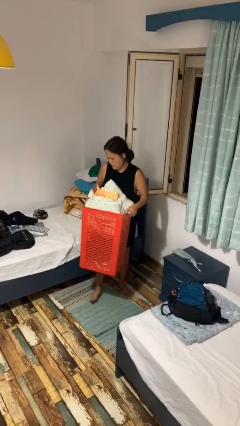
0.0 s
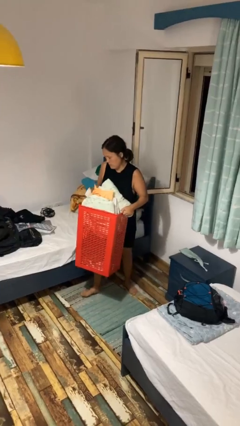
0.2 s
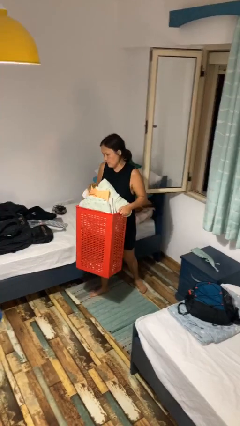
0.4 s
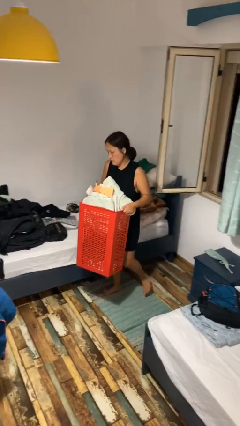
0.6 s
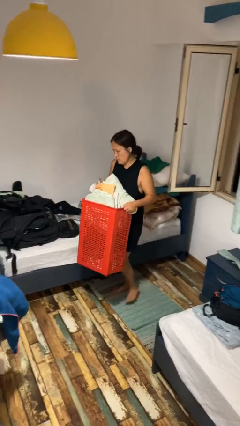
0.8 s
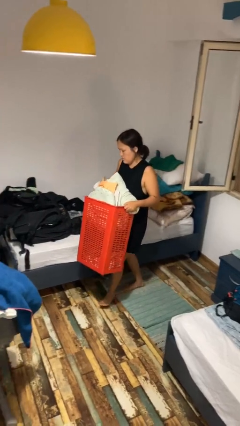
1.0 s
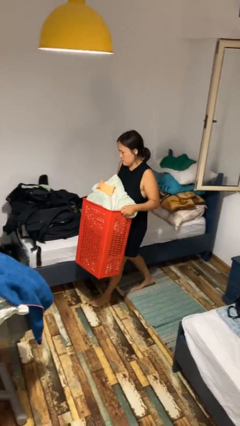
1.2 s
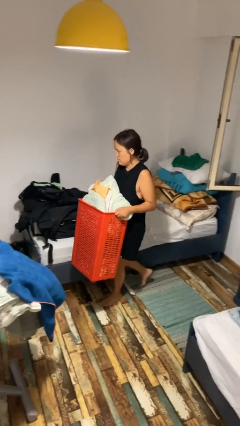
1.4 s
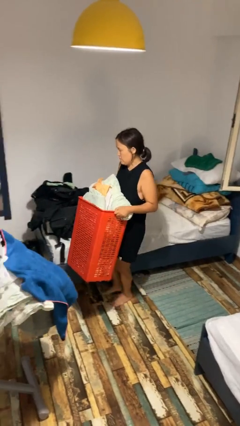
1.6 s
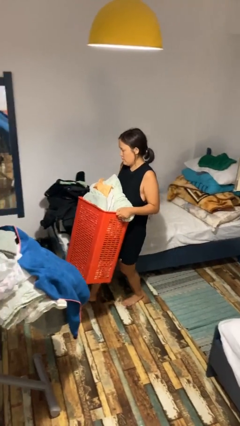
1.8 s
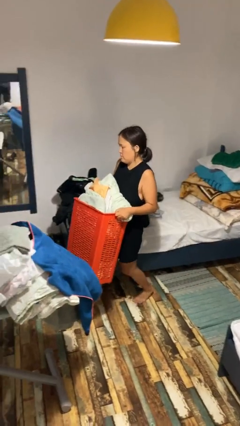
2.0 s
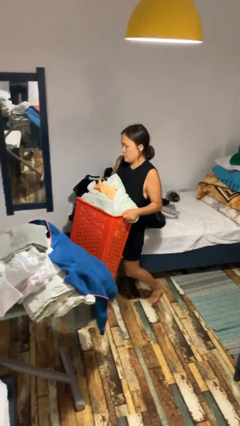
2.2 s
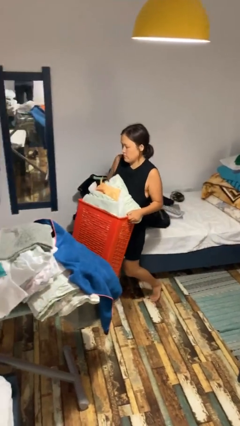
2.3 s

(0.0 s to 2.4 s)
person carries laundry basket

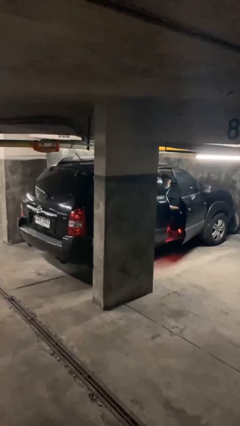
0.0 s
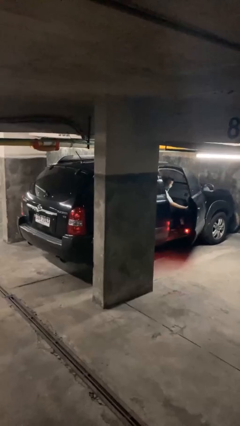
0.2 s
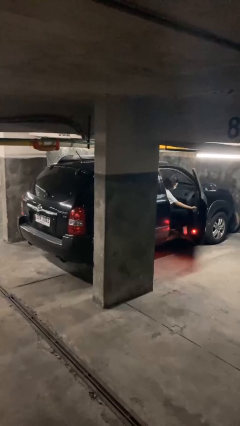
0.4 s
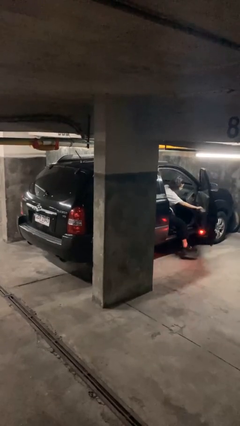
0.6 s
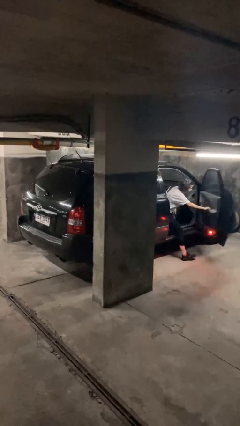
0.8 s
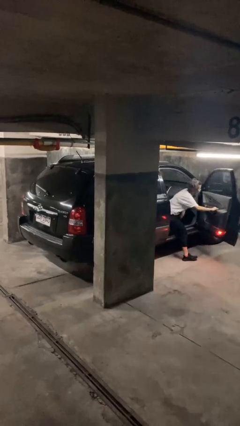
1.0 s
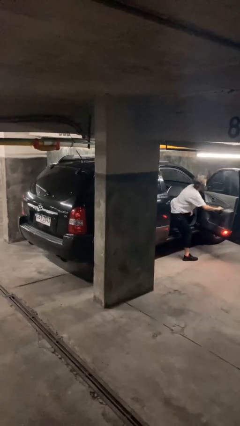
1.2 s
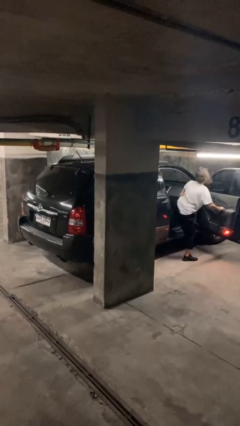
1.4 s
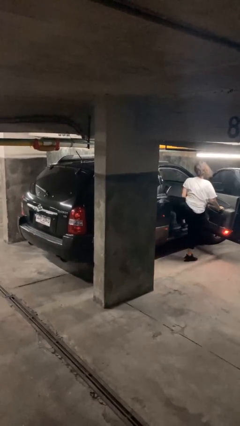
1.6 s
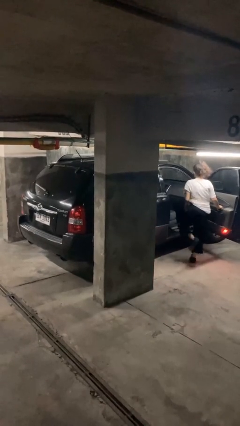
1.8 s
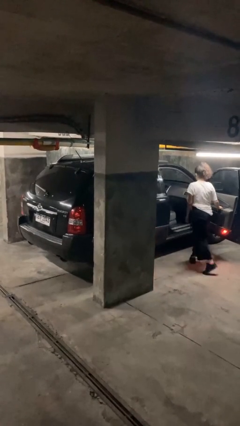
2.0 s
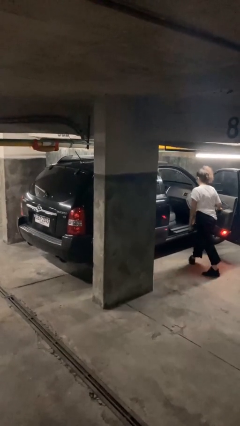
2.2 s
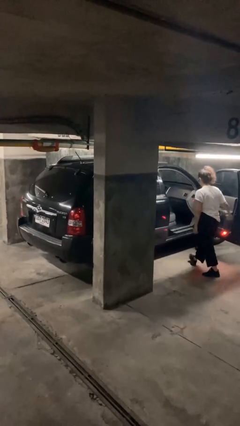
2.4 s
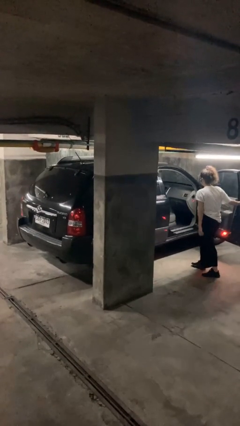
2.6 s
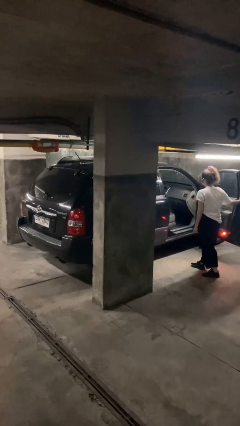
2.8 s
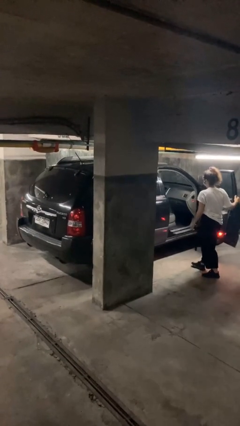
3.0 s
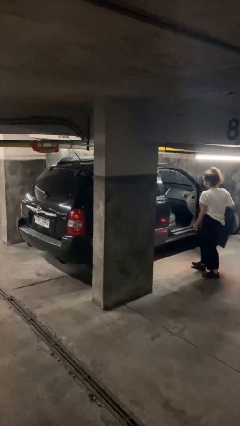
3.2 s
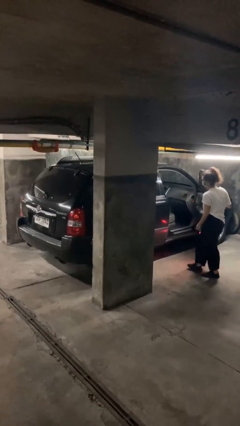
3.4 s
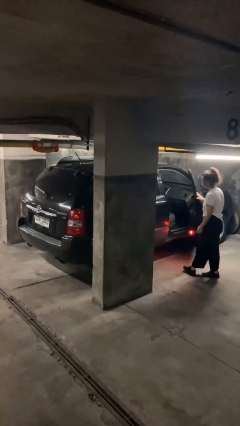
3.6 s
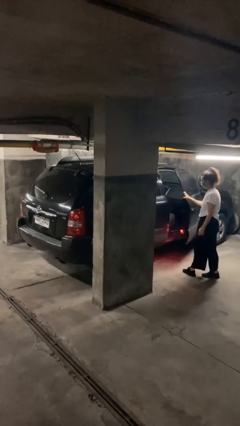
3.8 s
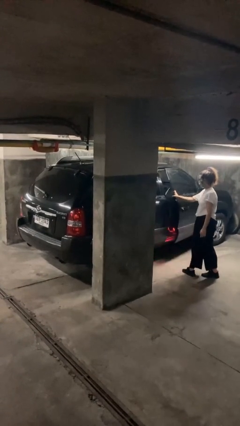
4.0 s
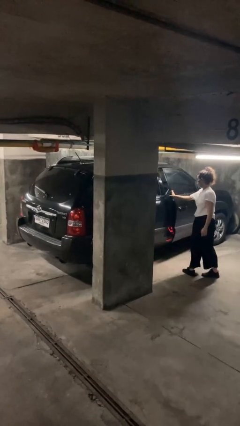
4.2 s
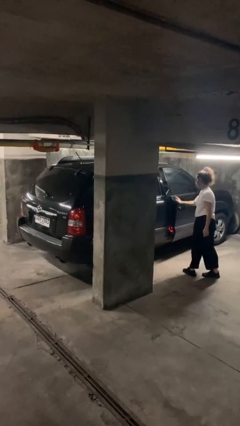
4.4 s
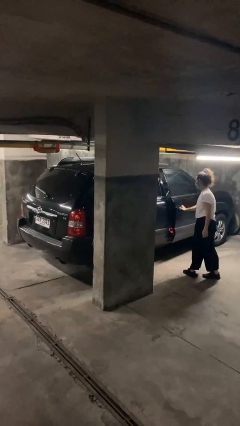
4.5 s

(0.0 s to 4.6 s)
car drops off person

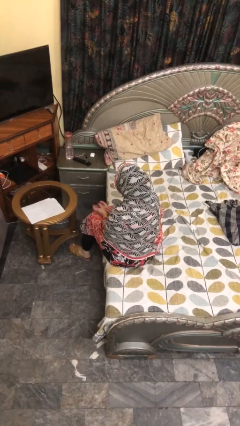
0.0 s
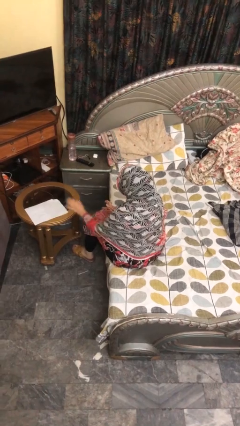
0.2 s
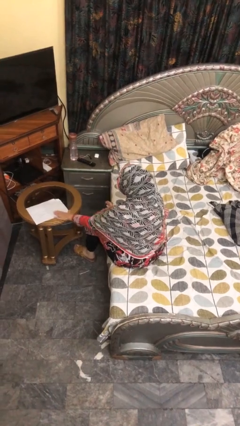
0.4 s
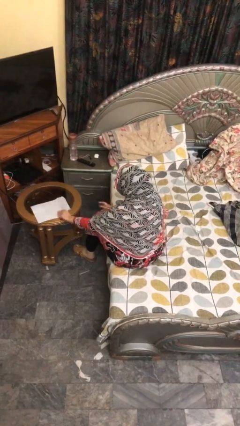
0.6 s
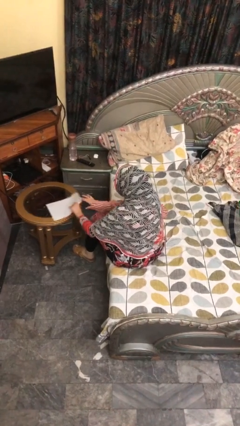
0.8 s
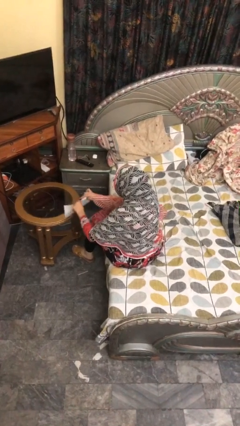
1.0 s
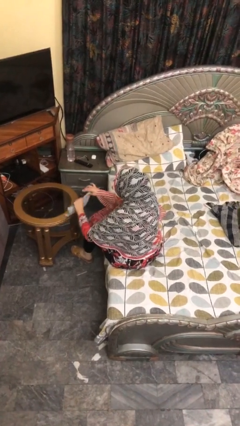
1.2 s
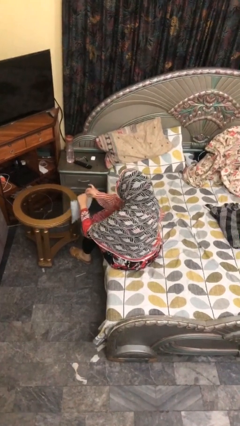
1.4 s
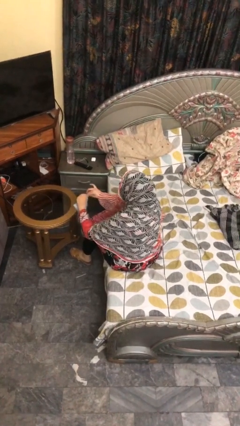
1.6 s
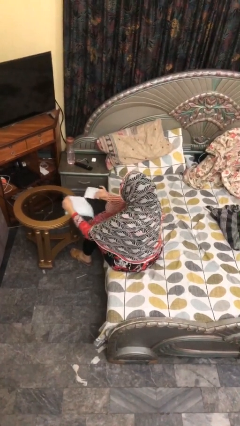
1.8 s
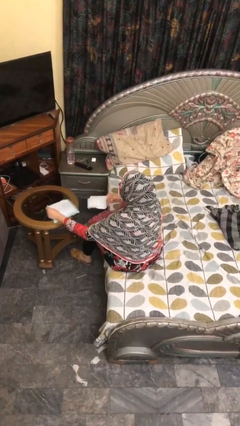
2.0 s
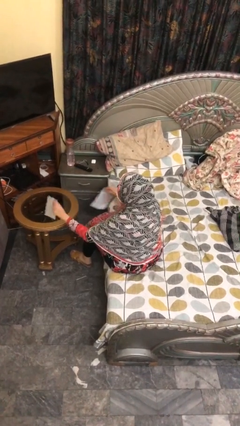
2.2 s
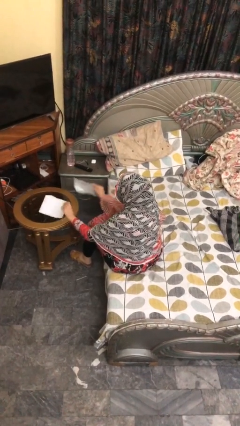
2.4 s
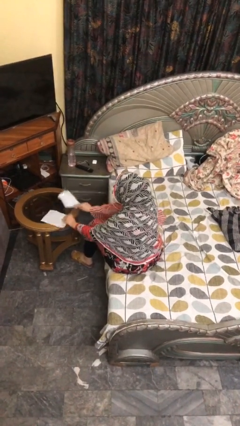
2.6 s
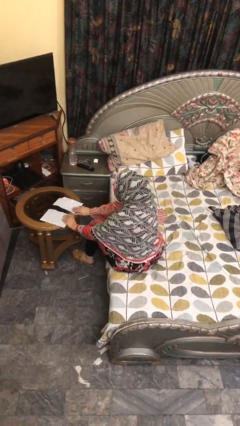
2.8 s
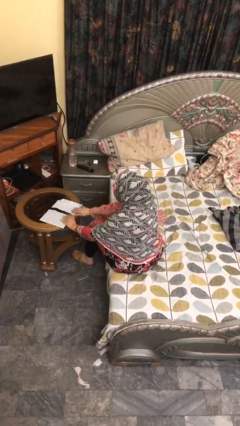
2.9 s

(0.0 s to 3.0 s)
person tears paper

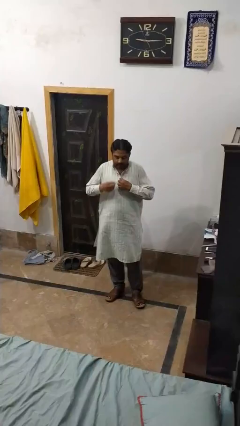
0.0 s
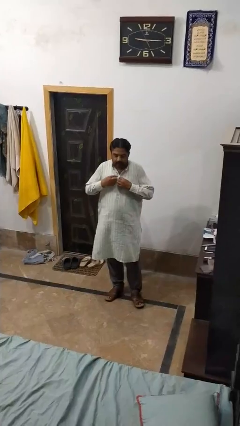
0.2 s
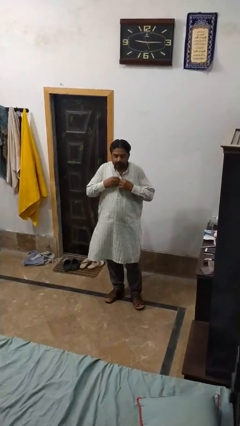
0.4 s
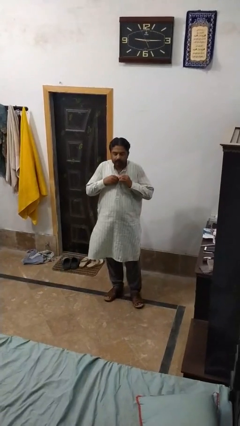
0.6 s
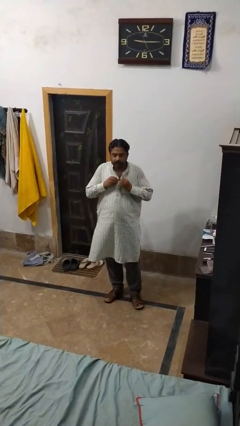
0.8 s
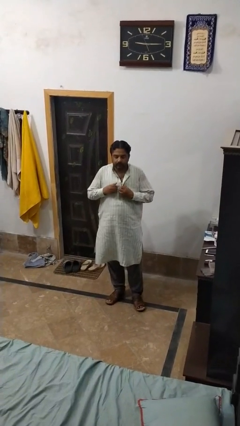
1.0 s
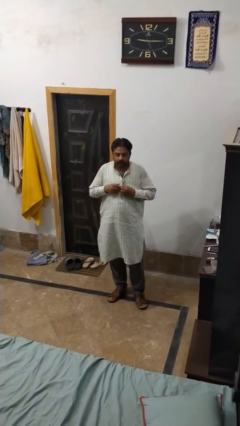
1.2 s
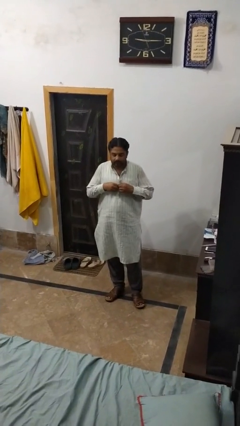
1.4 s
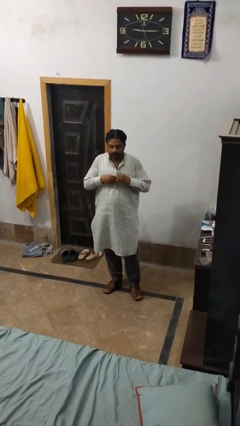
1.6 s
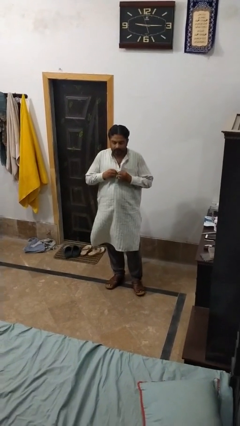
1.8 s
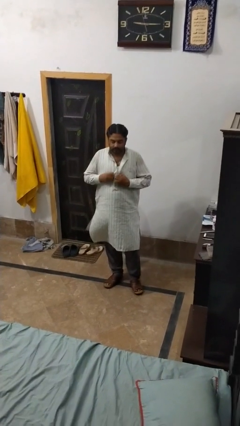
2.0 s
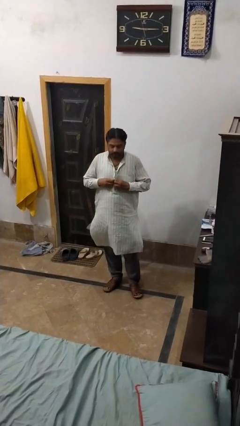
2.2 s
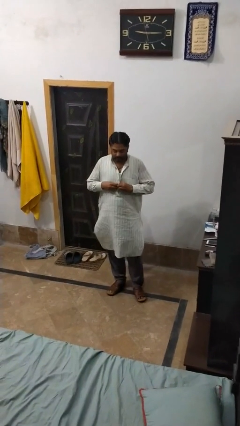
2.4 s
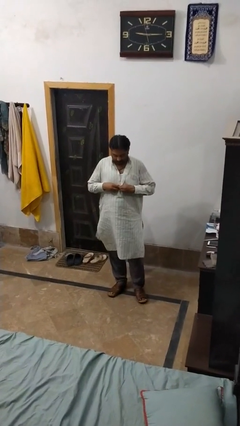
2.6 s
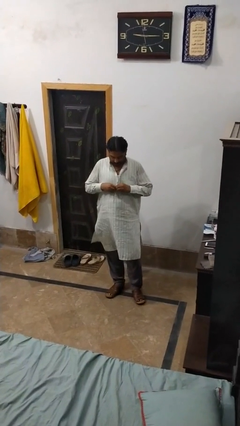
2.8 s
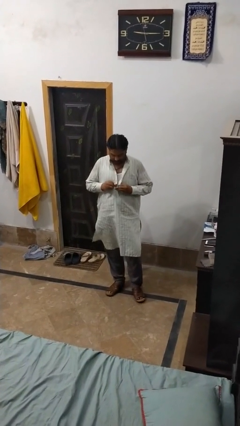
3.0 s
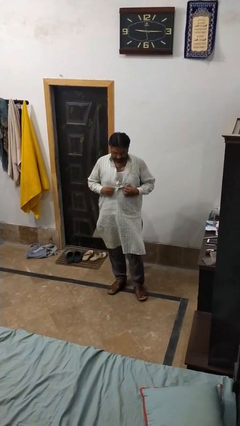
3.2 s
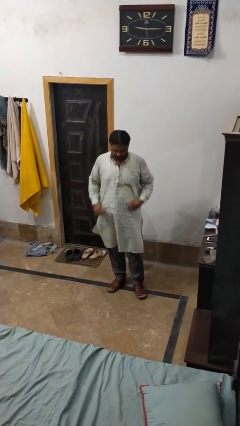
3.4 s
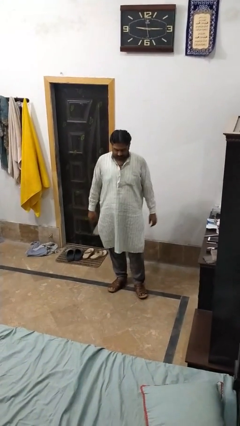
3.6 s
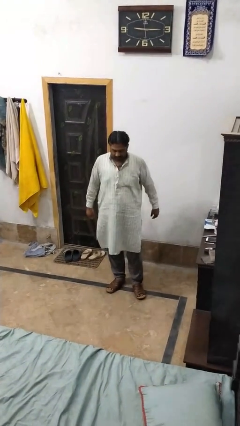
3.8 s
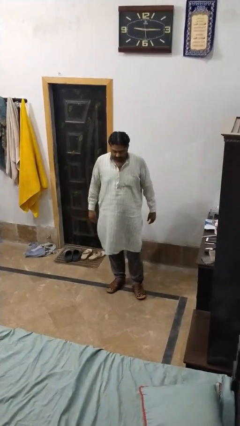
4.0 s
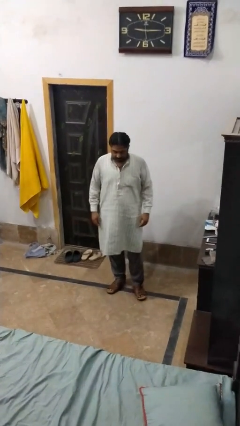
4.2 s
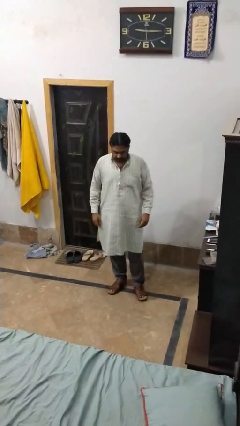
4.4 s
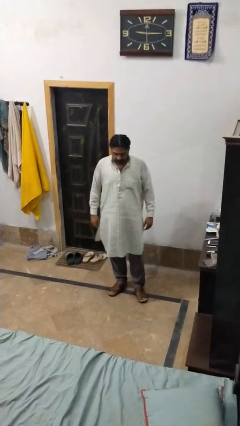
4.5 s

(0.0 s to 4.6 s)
person unbuttons shirt

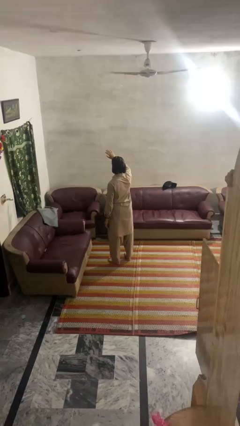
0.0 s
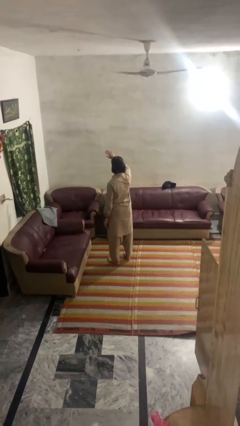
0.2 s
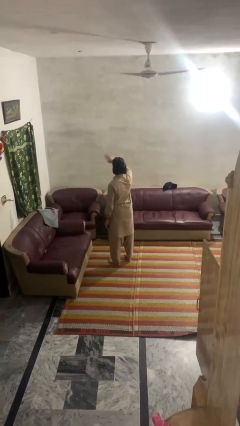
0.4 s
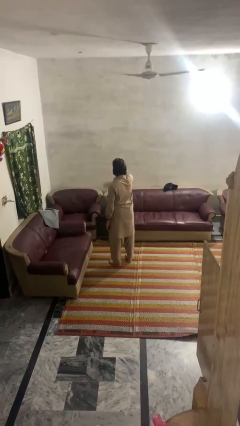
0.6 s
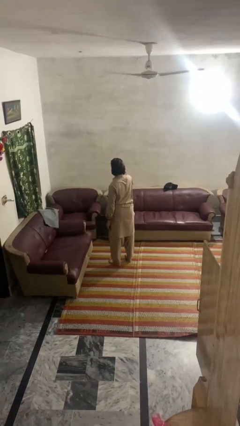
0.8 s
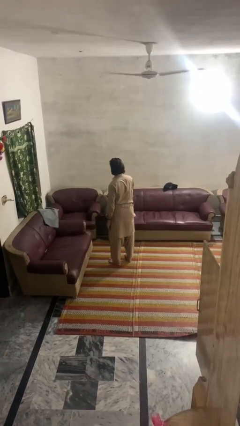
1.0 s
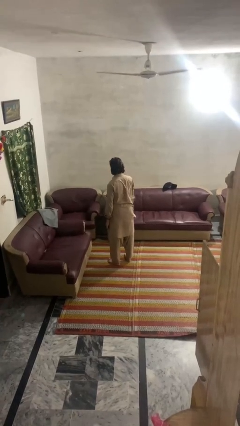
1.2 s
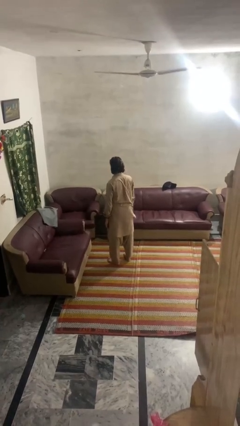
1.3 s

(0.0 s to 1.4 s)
person gestures swipe down

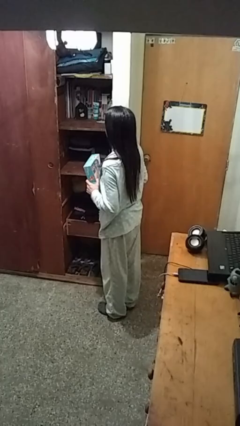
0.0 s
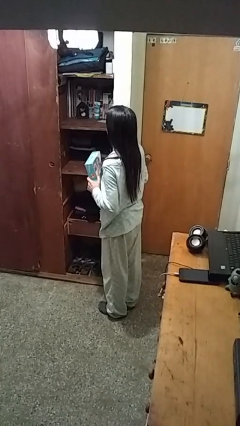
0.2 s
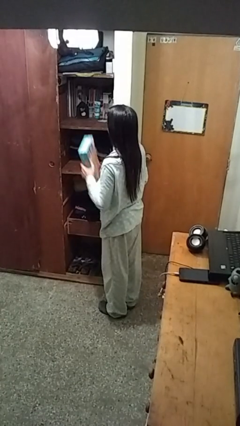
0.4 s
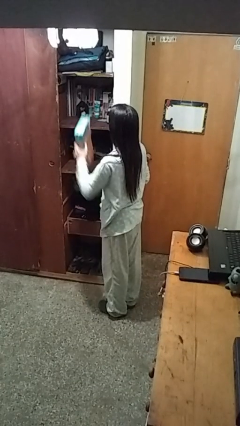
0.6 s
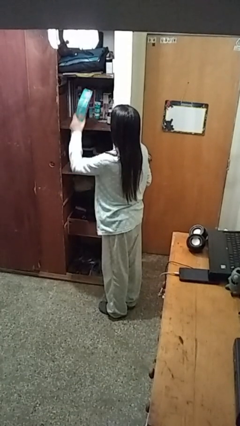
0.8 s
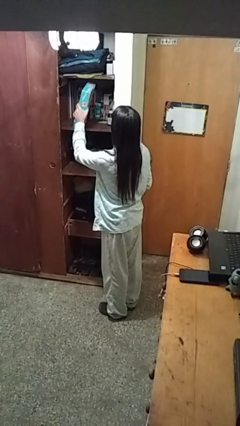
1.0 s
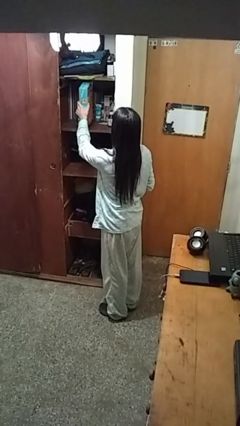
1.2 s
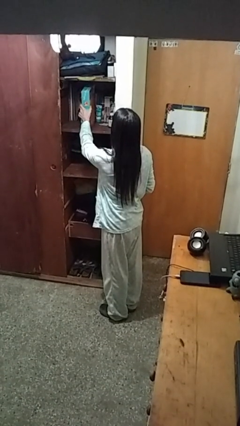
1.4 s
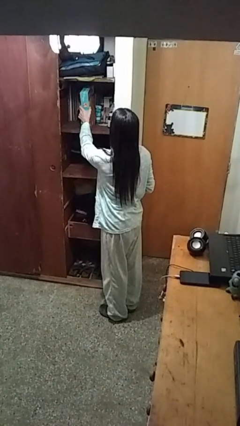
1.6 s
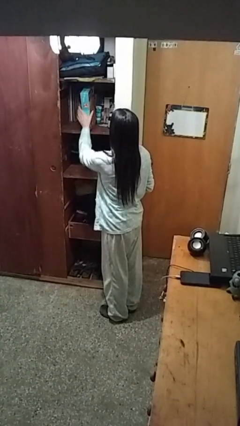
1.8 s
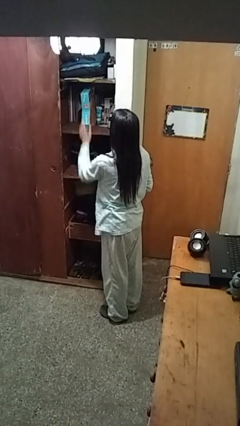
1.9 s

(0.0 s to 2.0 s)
person picks up object from shelf
